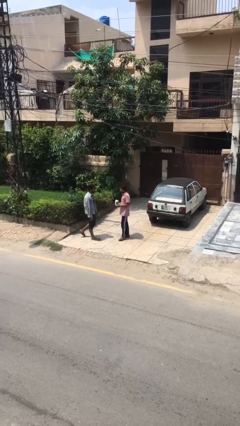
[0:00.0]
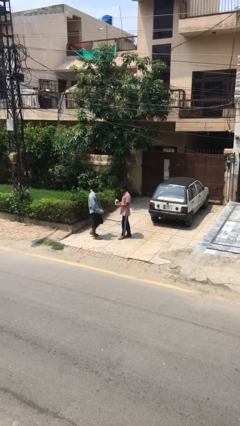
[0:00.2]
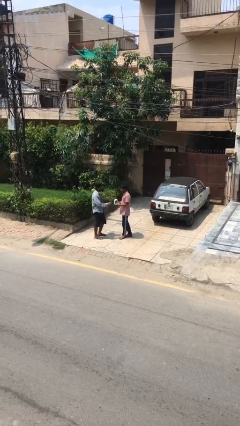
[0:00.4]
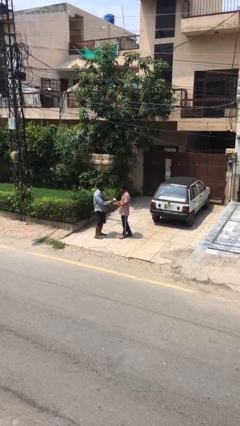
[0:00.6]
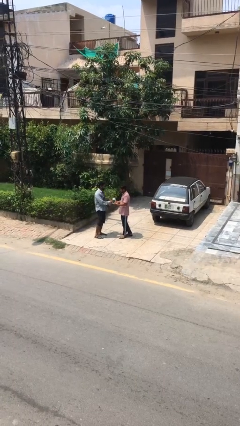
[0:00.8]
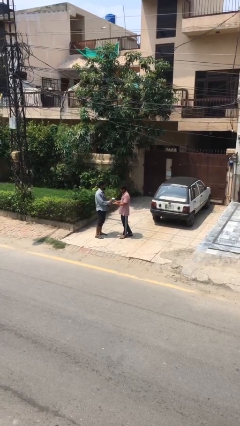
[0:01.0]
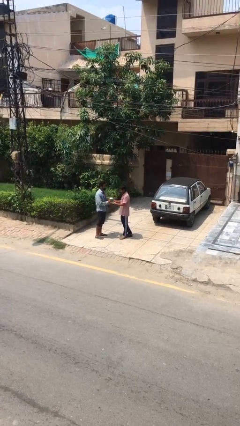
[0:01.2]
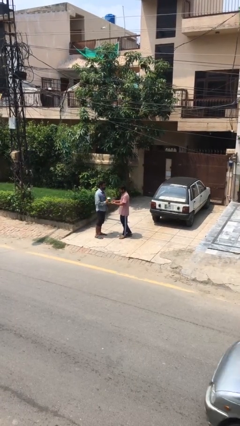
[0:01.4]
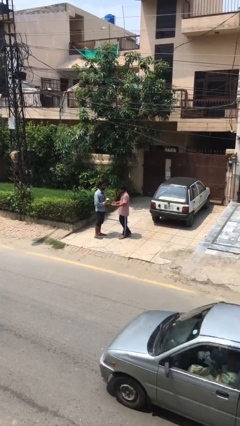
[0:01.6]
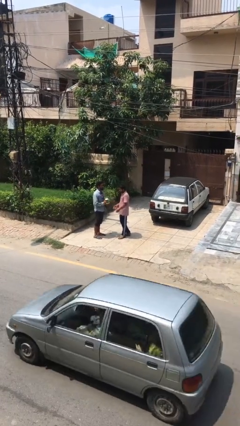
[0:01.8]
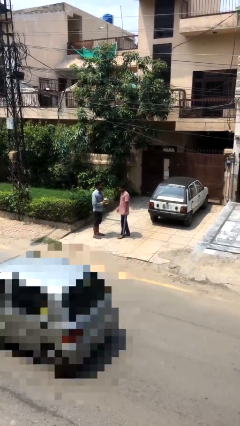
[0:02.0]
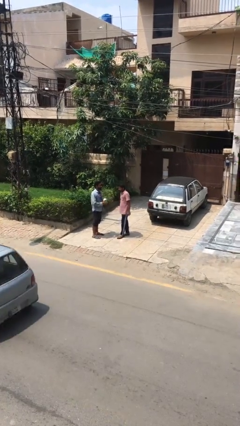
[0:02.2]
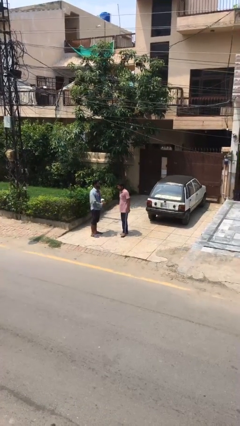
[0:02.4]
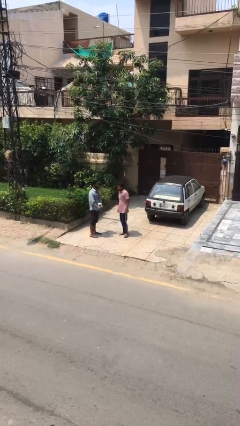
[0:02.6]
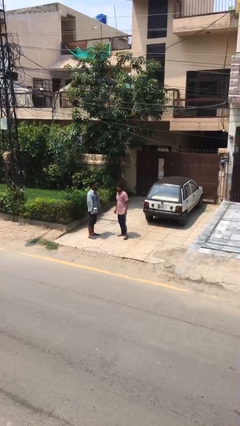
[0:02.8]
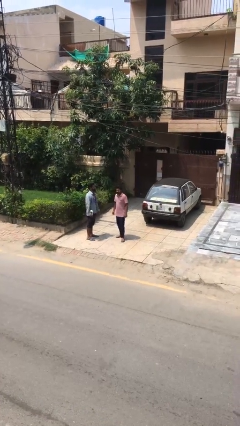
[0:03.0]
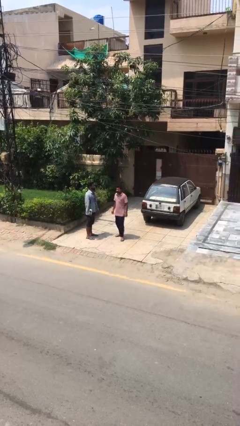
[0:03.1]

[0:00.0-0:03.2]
person transfers object to person

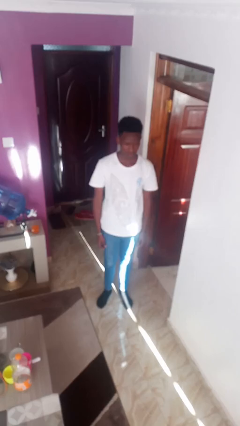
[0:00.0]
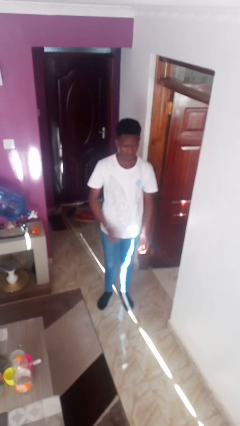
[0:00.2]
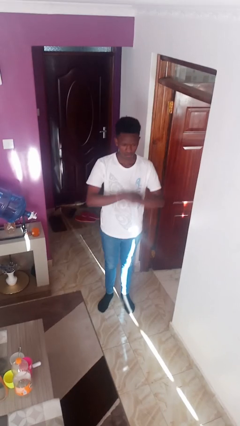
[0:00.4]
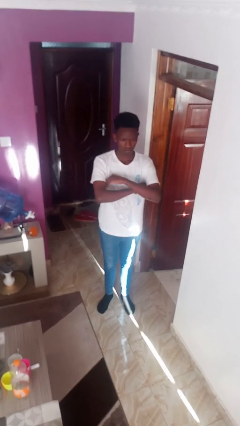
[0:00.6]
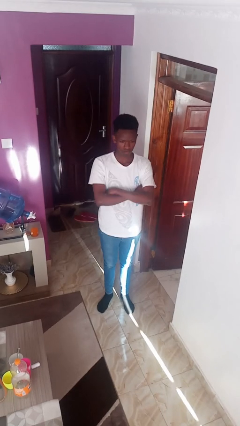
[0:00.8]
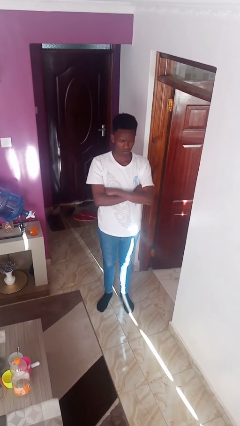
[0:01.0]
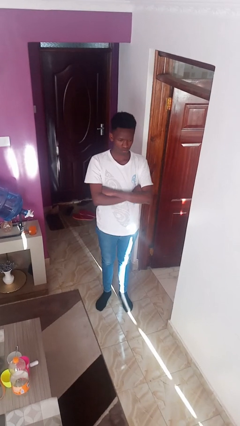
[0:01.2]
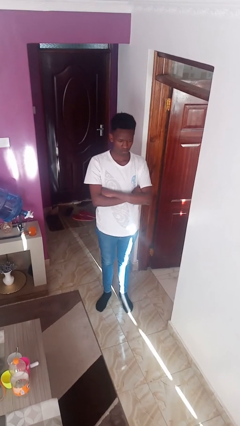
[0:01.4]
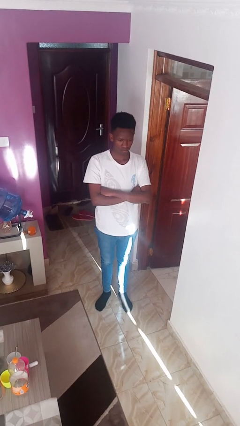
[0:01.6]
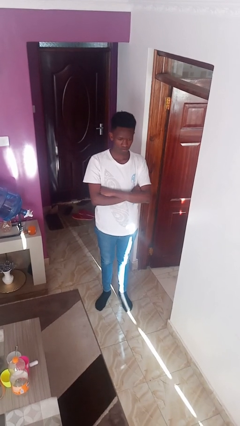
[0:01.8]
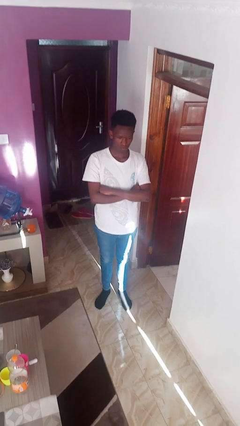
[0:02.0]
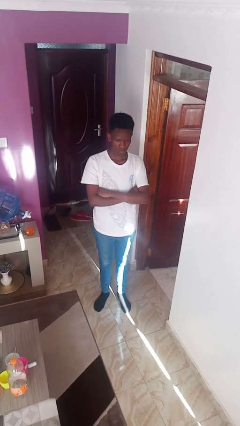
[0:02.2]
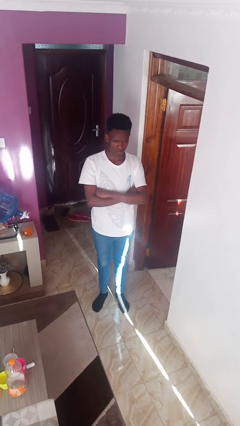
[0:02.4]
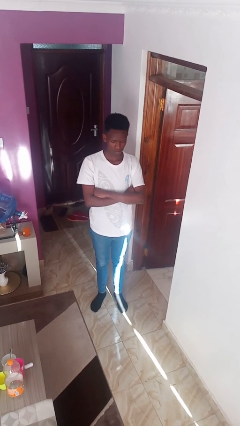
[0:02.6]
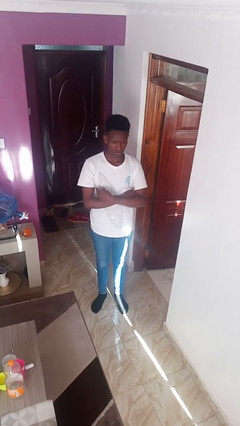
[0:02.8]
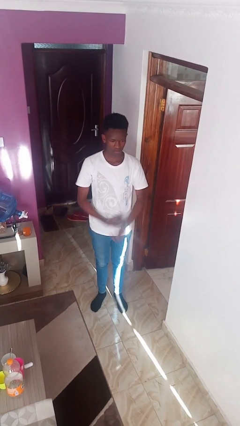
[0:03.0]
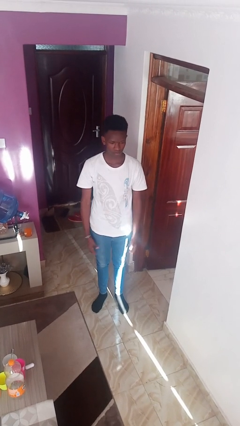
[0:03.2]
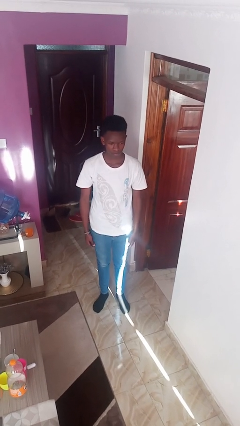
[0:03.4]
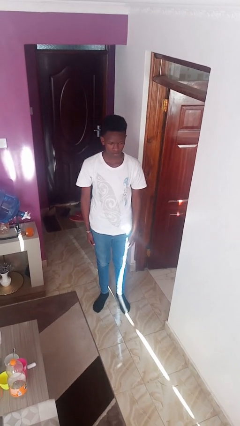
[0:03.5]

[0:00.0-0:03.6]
person crosses arms

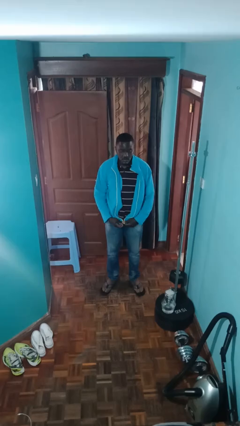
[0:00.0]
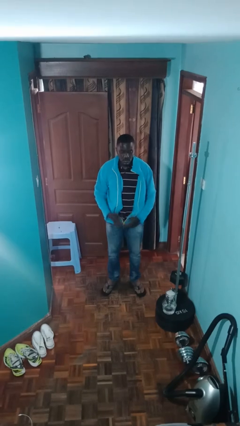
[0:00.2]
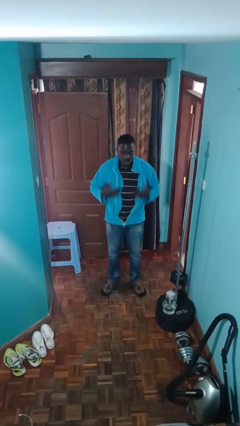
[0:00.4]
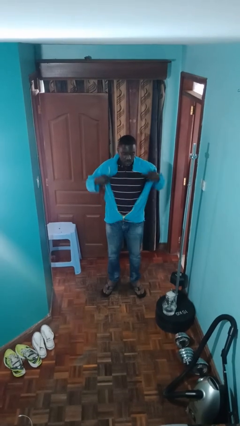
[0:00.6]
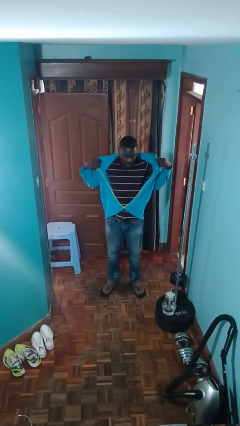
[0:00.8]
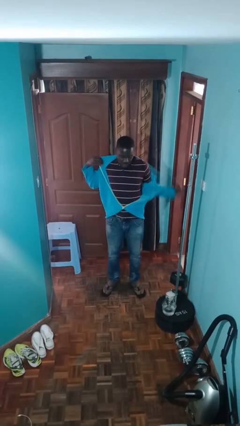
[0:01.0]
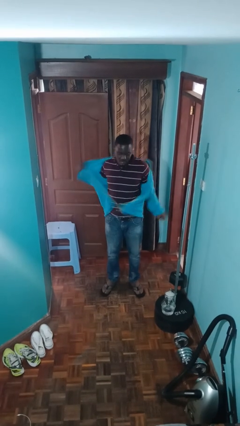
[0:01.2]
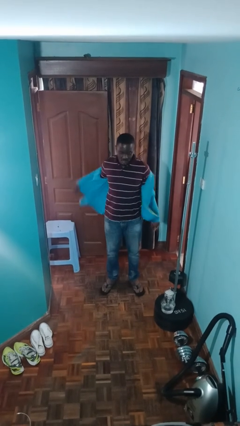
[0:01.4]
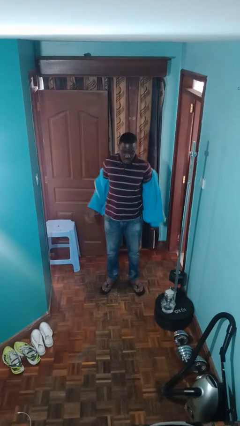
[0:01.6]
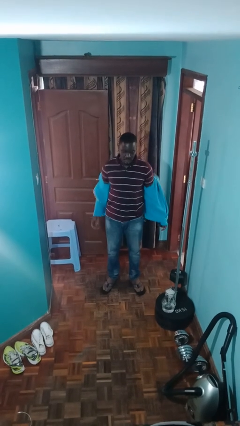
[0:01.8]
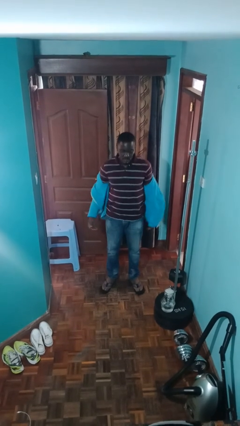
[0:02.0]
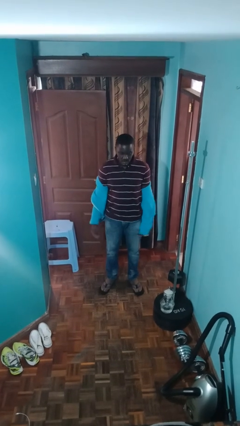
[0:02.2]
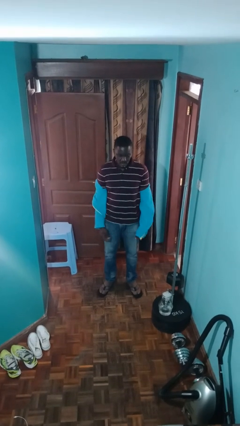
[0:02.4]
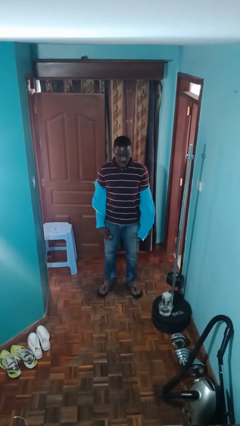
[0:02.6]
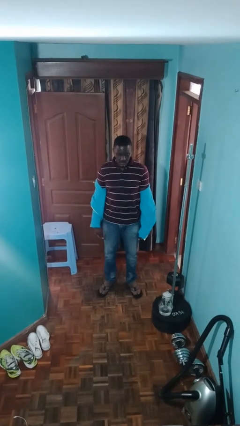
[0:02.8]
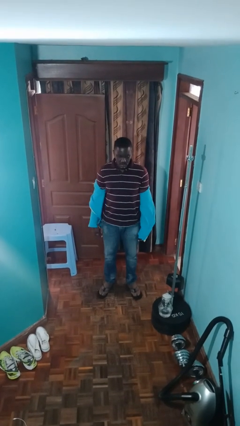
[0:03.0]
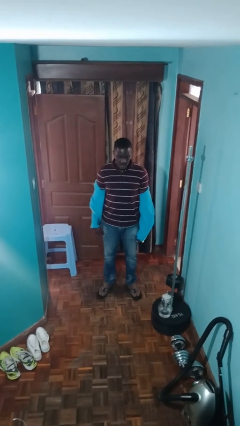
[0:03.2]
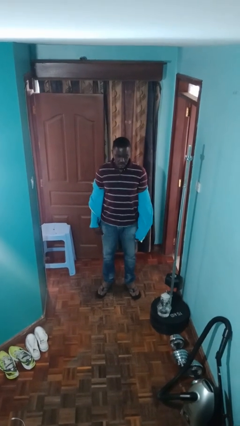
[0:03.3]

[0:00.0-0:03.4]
person takes off jacket

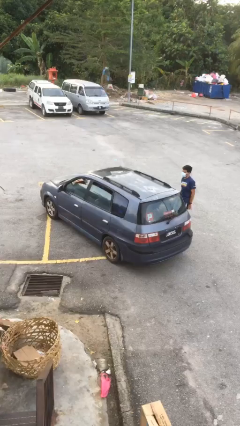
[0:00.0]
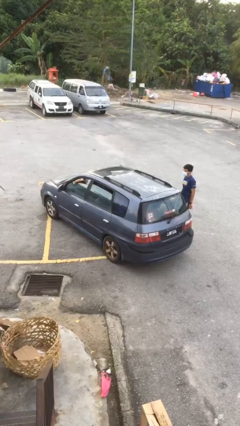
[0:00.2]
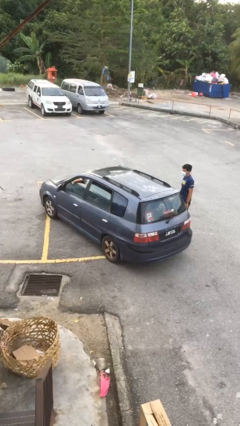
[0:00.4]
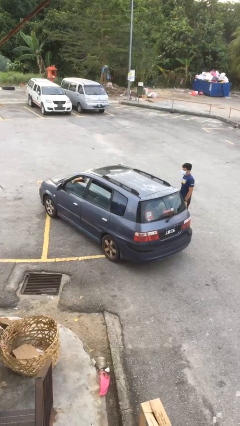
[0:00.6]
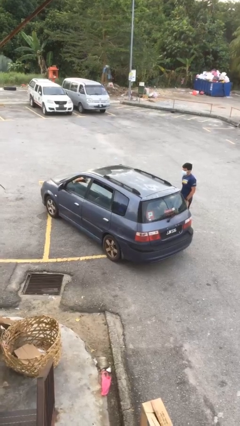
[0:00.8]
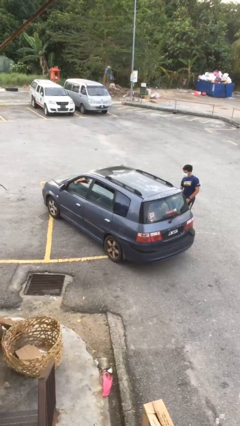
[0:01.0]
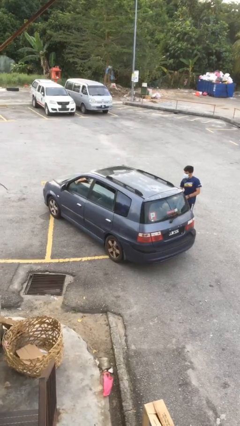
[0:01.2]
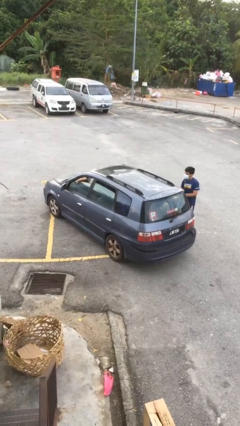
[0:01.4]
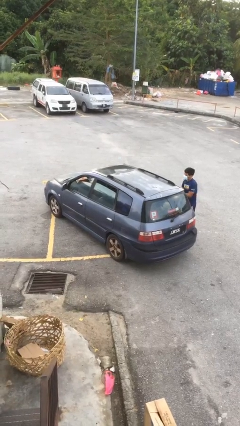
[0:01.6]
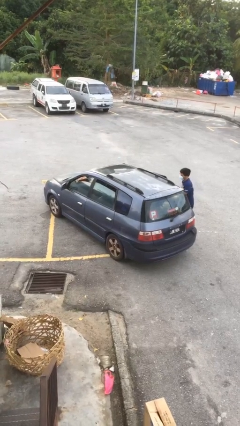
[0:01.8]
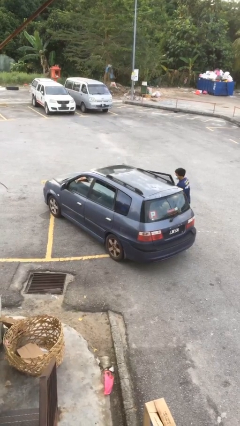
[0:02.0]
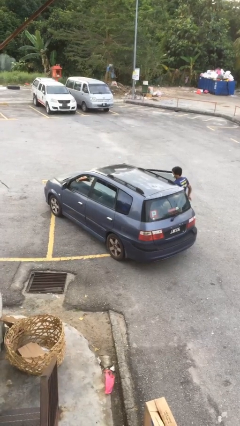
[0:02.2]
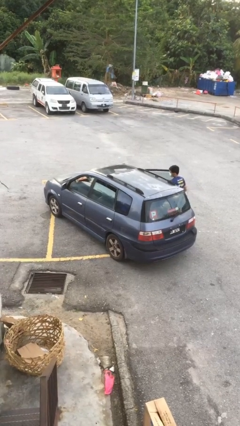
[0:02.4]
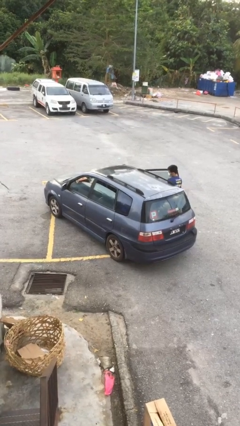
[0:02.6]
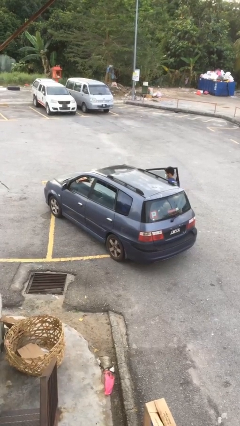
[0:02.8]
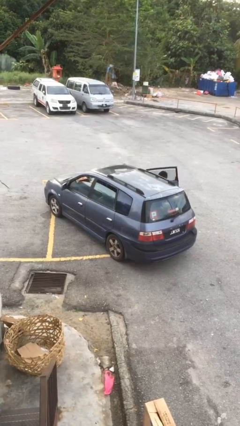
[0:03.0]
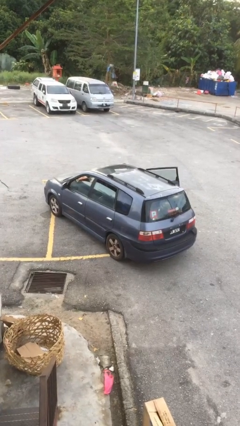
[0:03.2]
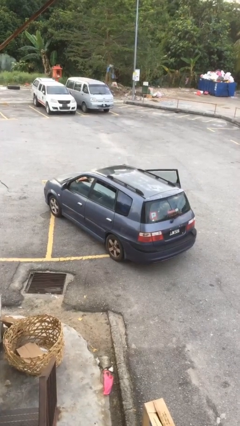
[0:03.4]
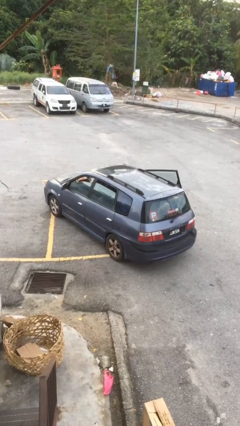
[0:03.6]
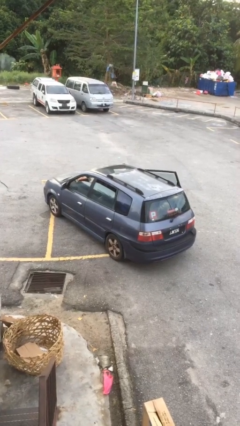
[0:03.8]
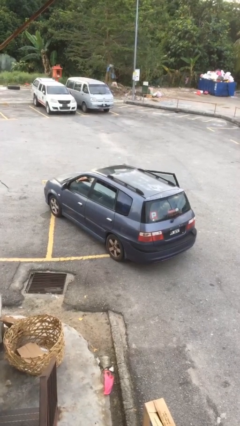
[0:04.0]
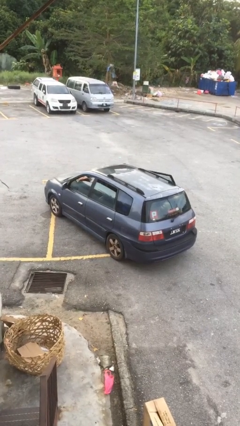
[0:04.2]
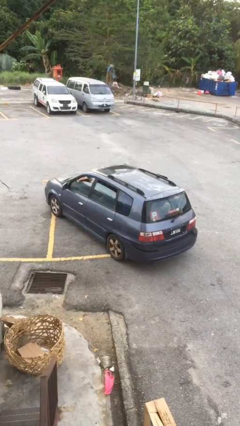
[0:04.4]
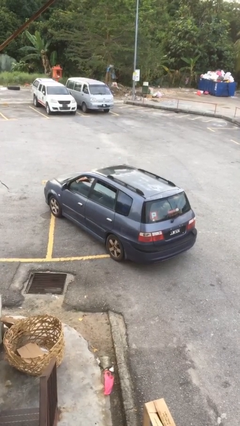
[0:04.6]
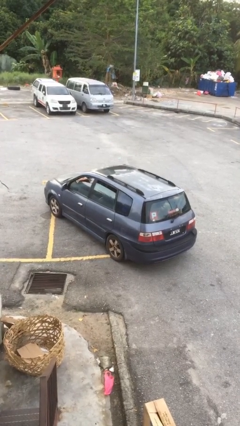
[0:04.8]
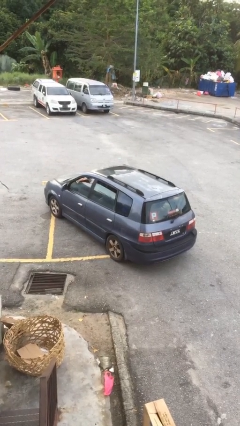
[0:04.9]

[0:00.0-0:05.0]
car picks up person

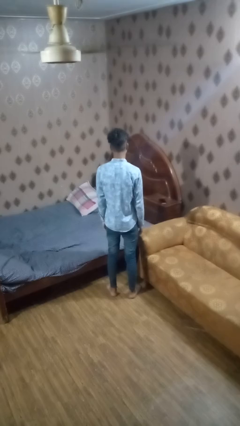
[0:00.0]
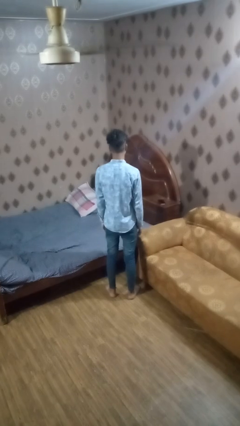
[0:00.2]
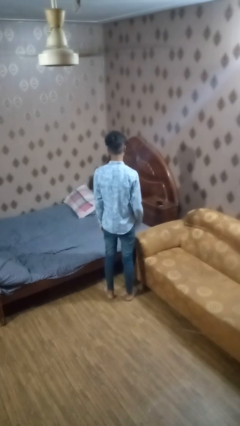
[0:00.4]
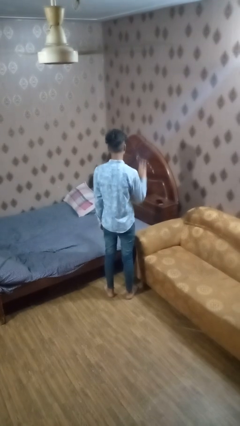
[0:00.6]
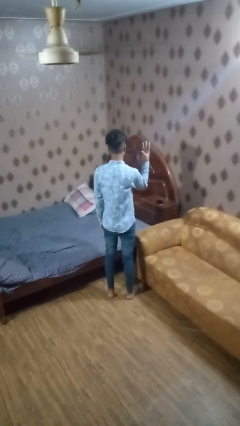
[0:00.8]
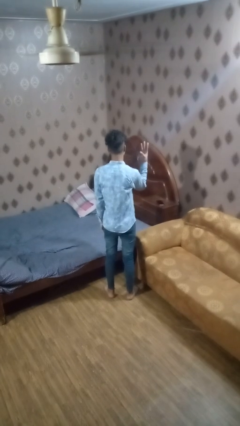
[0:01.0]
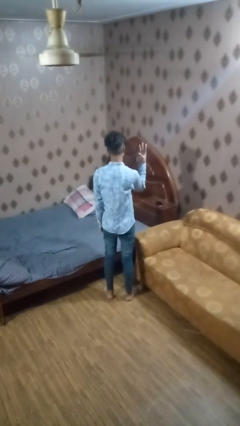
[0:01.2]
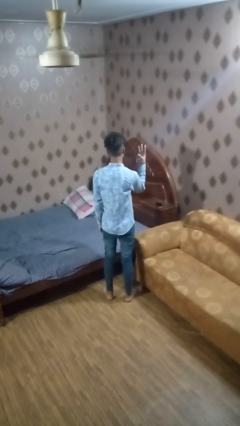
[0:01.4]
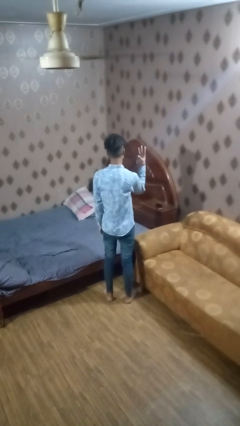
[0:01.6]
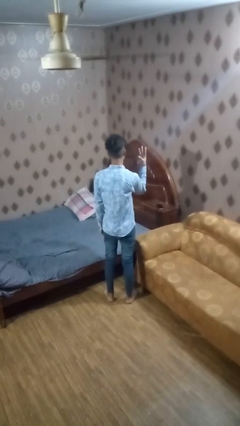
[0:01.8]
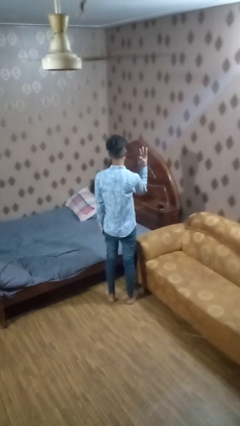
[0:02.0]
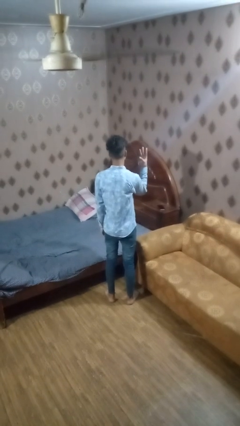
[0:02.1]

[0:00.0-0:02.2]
person gestures number three

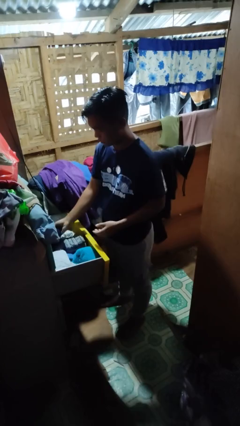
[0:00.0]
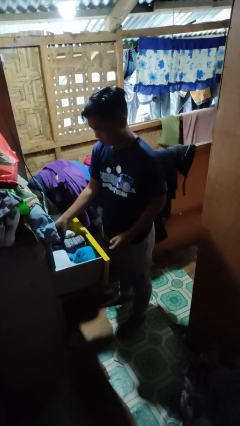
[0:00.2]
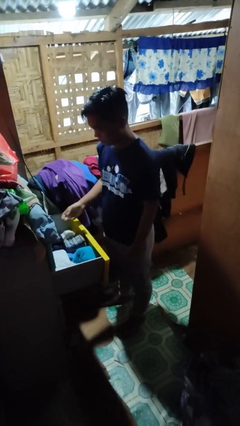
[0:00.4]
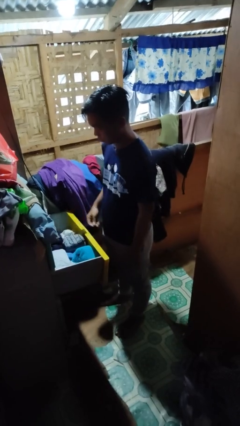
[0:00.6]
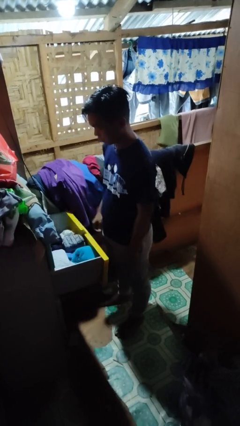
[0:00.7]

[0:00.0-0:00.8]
person puts clothes into dresser
